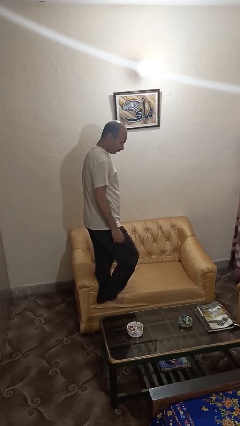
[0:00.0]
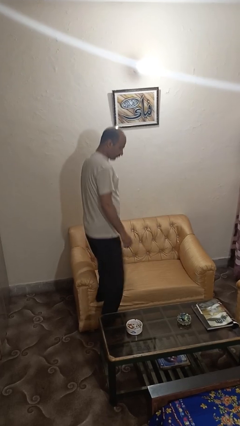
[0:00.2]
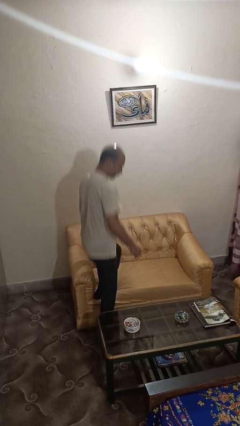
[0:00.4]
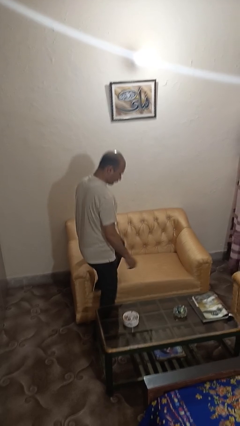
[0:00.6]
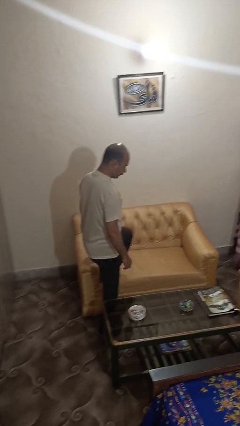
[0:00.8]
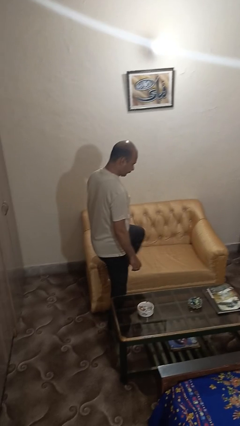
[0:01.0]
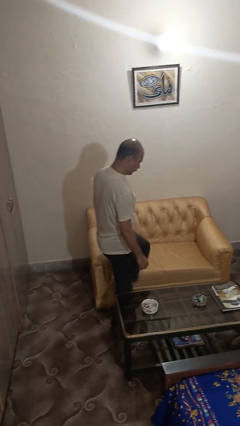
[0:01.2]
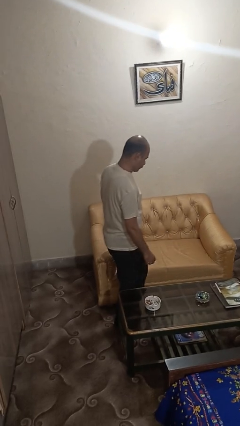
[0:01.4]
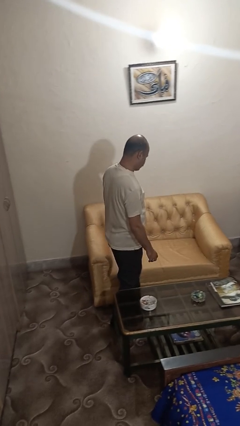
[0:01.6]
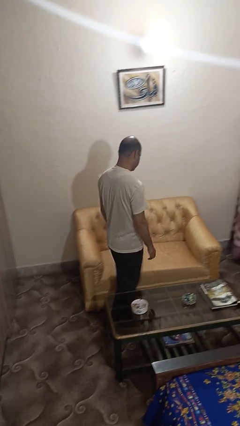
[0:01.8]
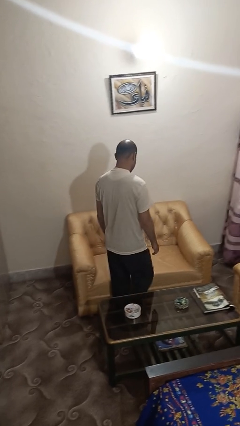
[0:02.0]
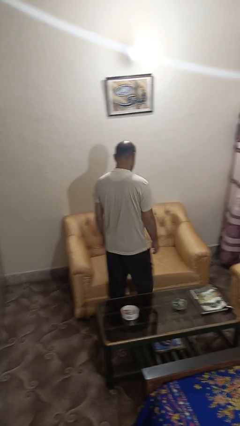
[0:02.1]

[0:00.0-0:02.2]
person climbs off couch

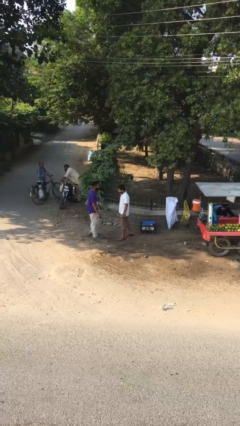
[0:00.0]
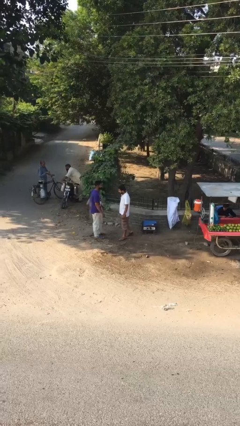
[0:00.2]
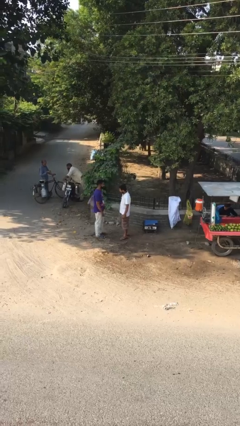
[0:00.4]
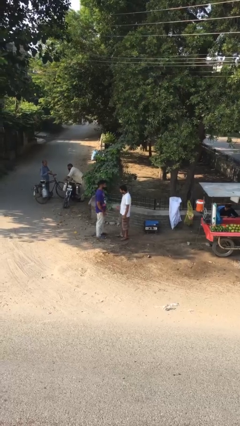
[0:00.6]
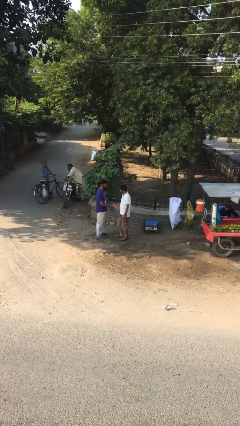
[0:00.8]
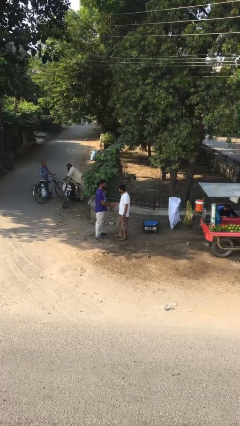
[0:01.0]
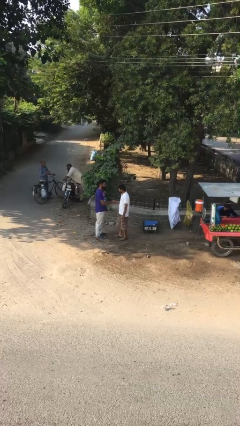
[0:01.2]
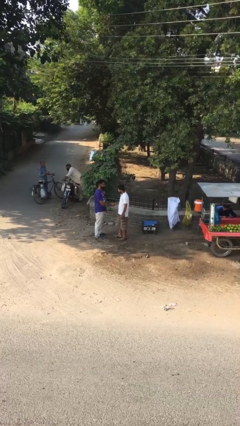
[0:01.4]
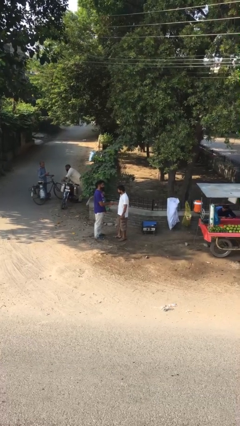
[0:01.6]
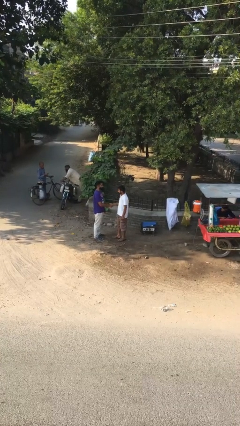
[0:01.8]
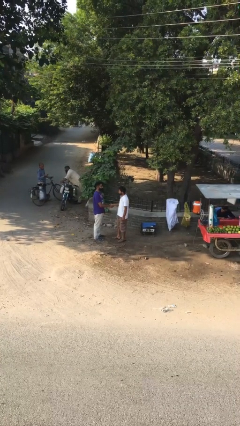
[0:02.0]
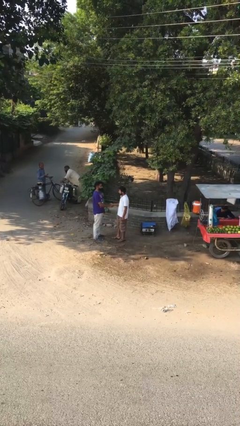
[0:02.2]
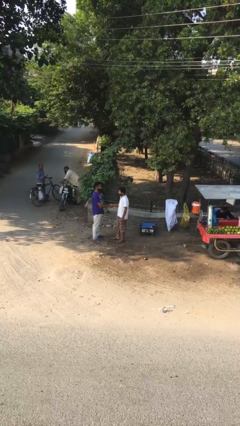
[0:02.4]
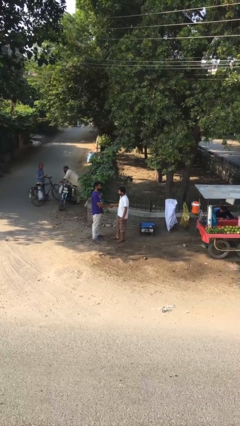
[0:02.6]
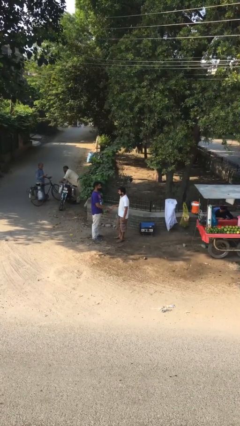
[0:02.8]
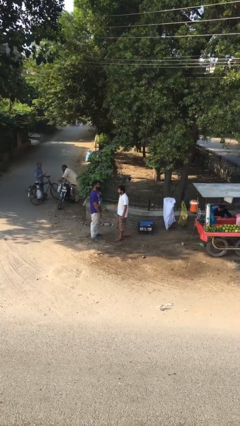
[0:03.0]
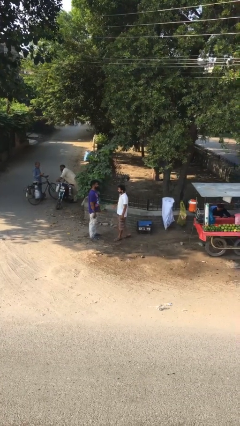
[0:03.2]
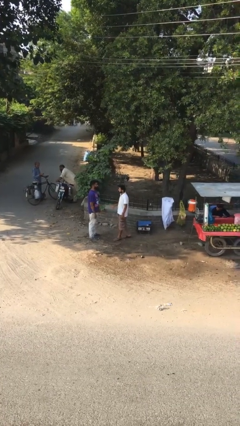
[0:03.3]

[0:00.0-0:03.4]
person shakes hand

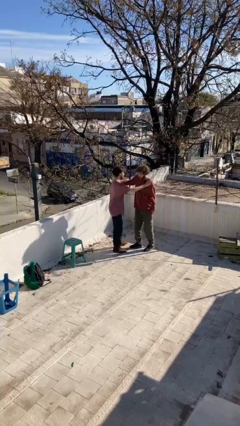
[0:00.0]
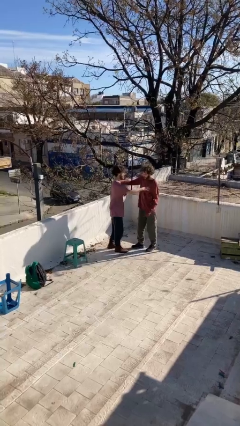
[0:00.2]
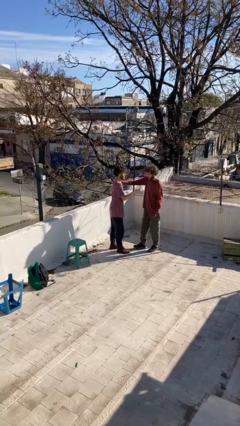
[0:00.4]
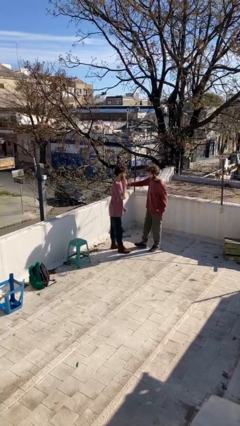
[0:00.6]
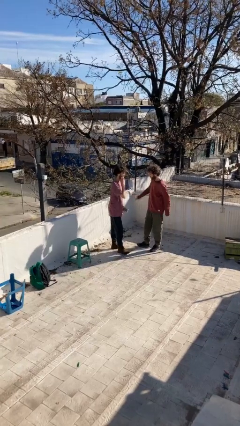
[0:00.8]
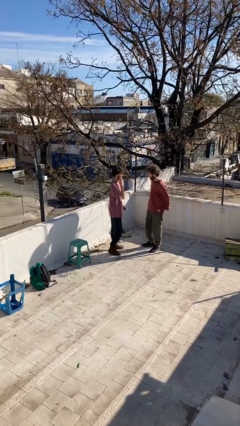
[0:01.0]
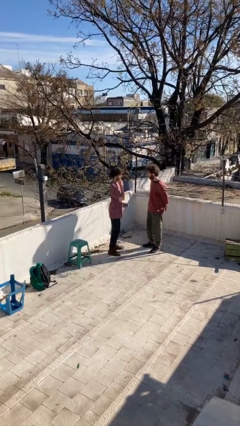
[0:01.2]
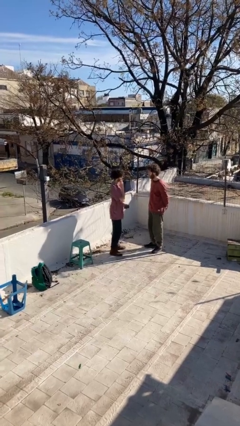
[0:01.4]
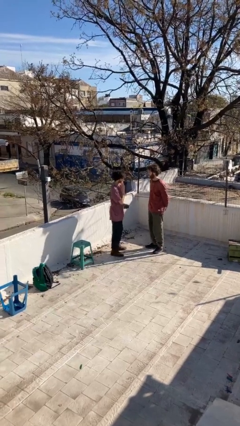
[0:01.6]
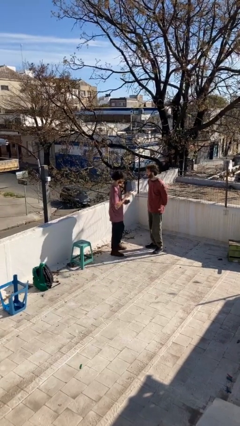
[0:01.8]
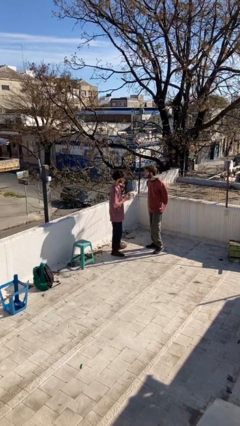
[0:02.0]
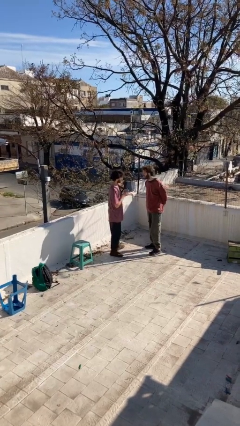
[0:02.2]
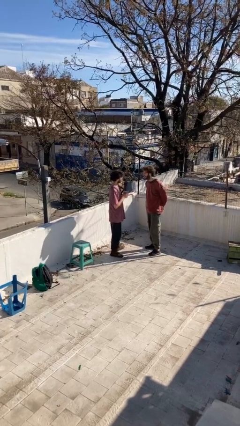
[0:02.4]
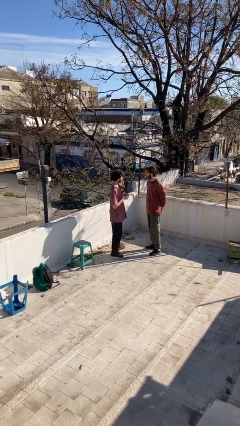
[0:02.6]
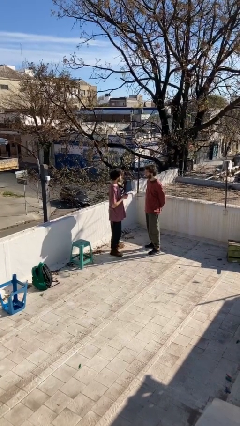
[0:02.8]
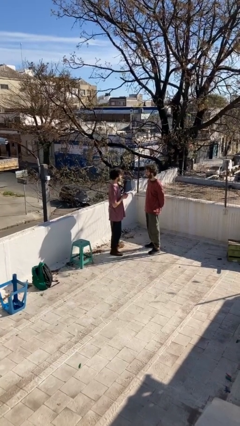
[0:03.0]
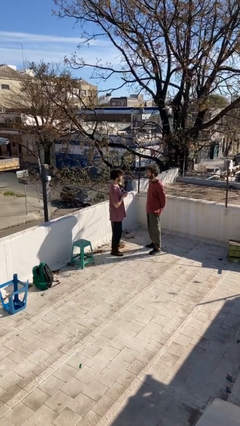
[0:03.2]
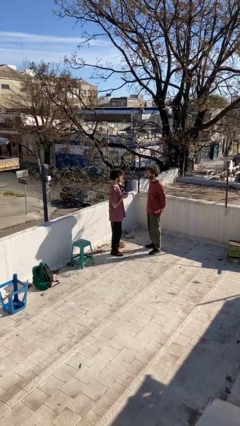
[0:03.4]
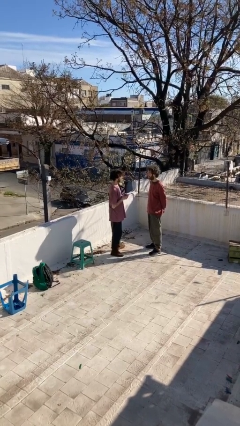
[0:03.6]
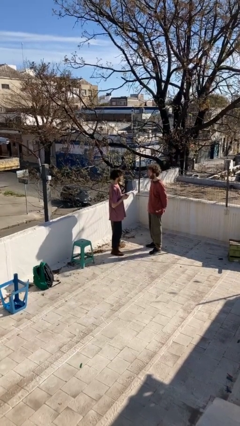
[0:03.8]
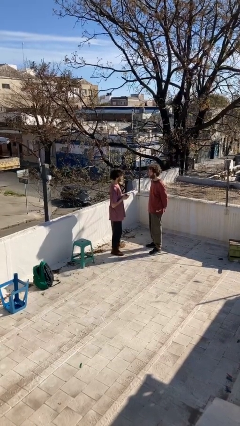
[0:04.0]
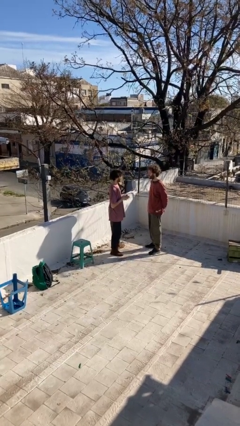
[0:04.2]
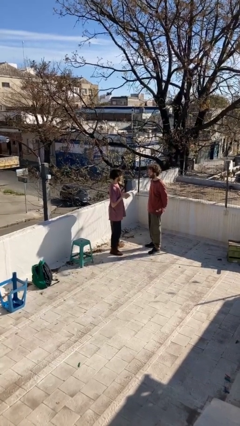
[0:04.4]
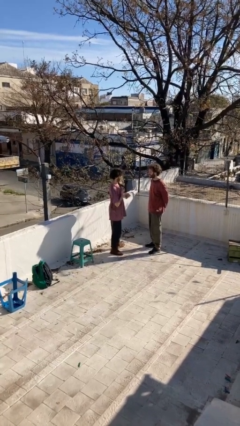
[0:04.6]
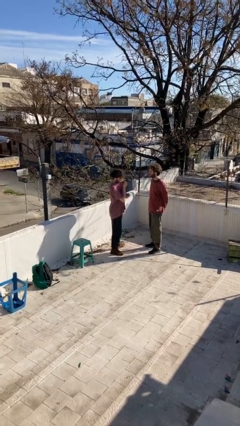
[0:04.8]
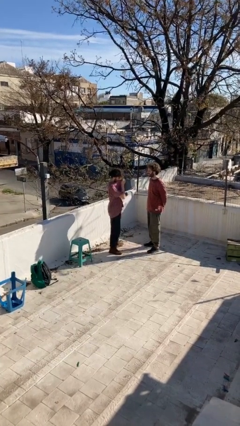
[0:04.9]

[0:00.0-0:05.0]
person talks to person

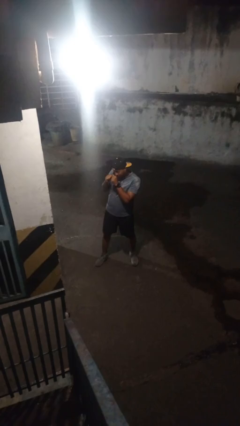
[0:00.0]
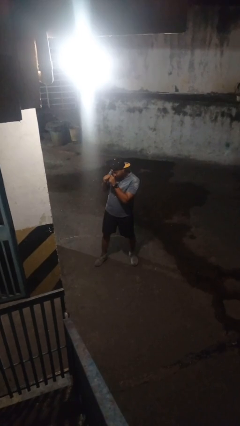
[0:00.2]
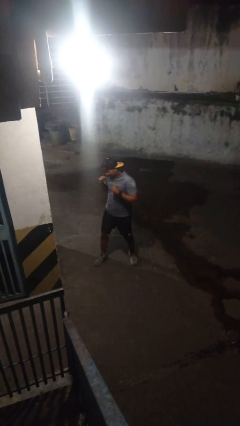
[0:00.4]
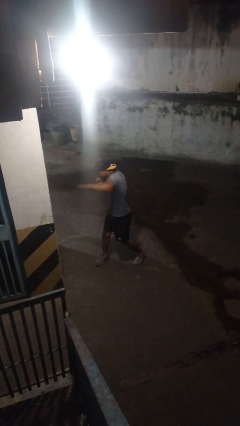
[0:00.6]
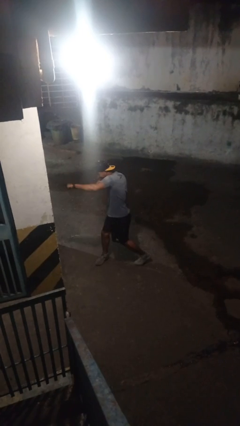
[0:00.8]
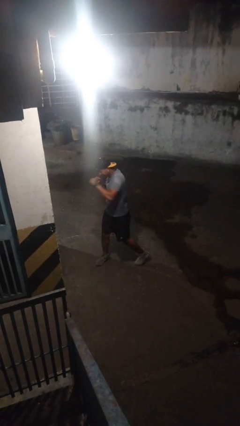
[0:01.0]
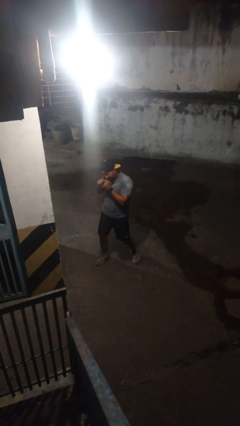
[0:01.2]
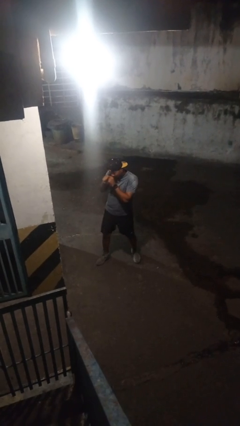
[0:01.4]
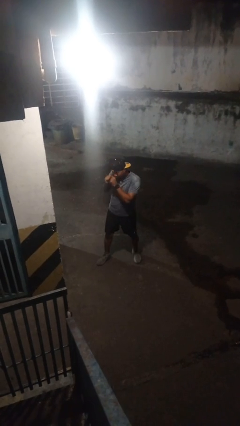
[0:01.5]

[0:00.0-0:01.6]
person punches

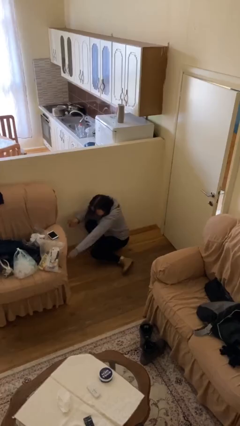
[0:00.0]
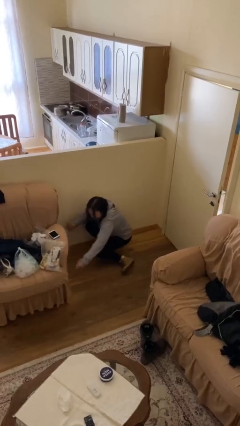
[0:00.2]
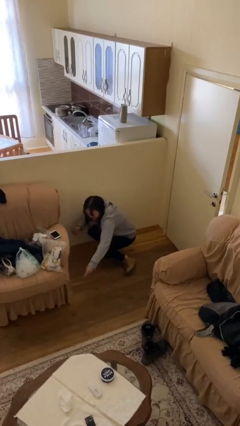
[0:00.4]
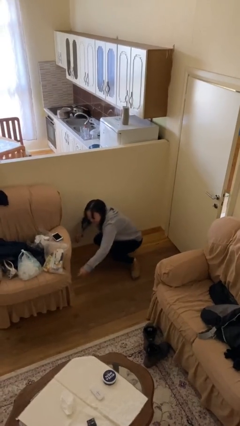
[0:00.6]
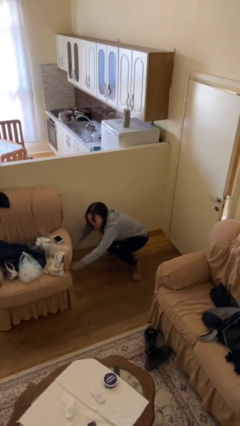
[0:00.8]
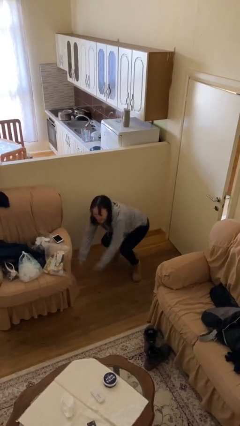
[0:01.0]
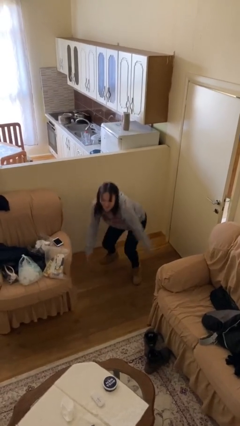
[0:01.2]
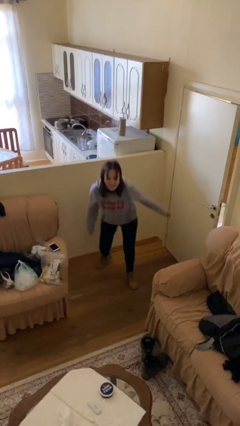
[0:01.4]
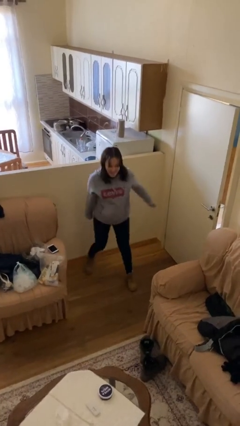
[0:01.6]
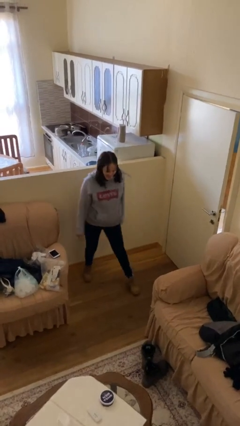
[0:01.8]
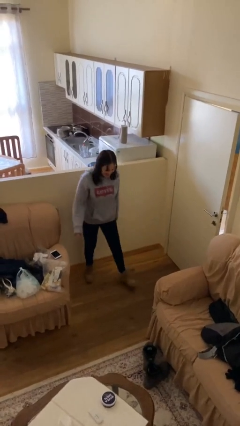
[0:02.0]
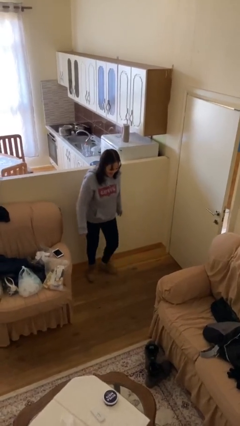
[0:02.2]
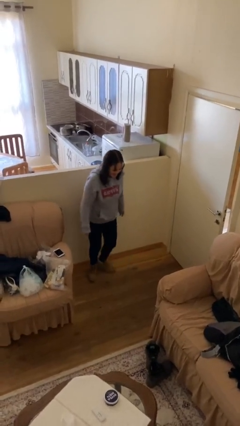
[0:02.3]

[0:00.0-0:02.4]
person stands up

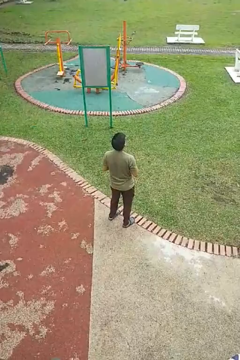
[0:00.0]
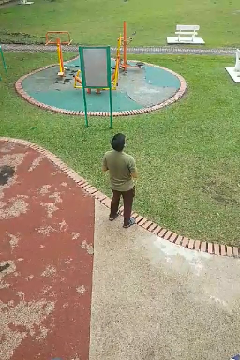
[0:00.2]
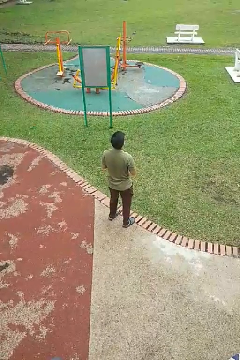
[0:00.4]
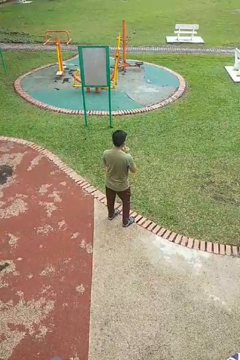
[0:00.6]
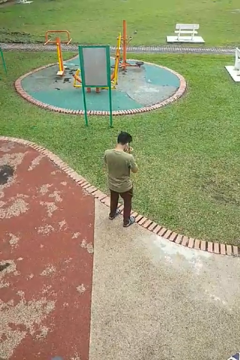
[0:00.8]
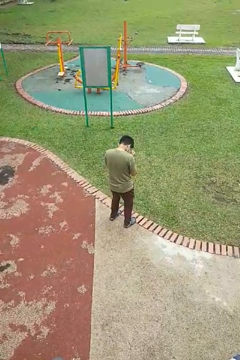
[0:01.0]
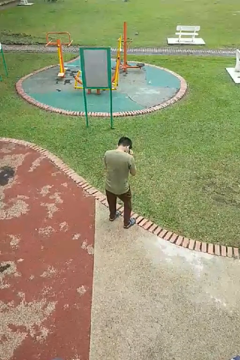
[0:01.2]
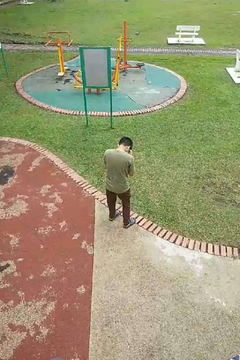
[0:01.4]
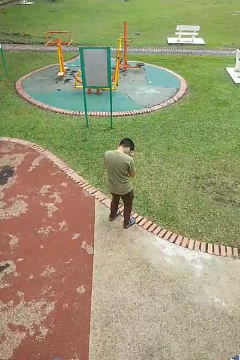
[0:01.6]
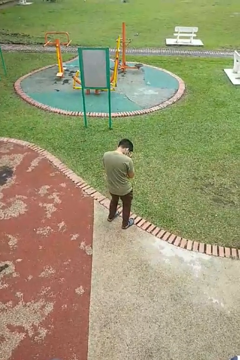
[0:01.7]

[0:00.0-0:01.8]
person wiggles hips

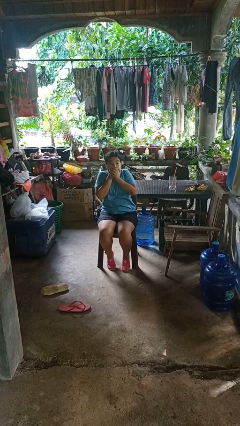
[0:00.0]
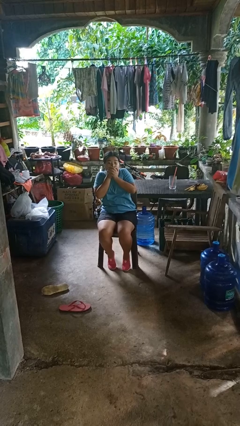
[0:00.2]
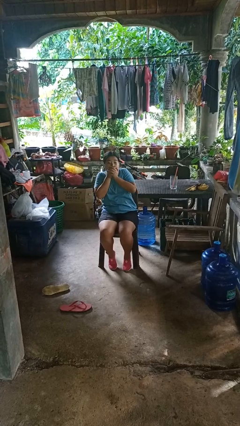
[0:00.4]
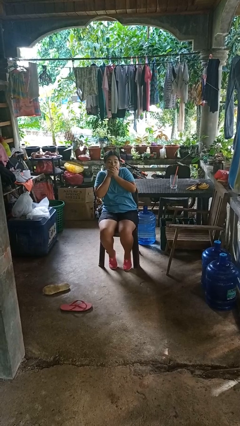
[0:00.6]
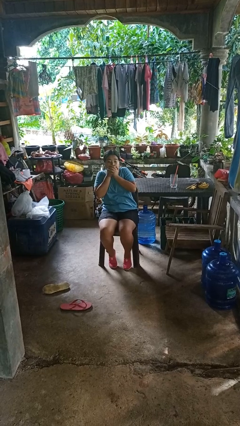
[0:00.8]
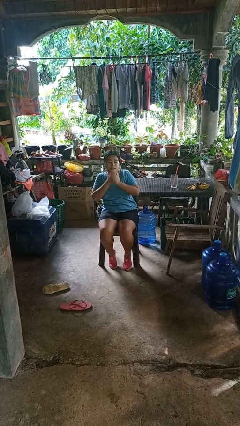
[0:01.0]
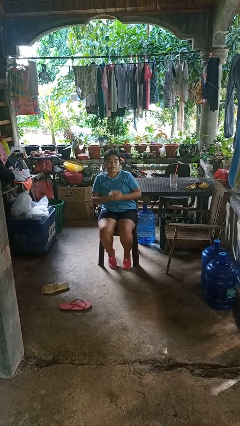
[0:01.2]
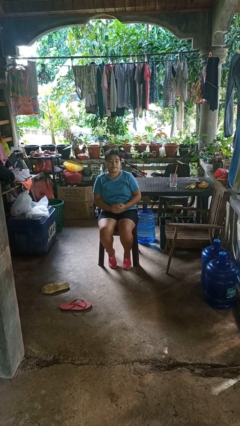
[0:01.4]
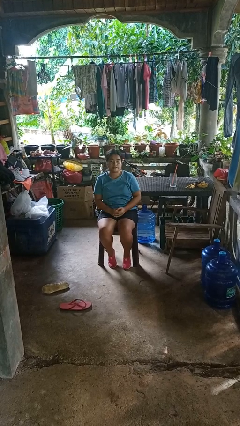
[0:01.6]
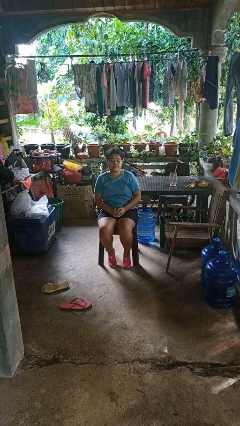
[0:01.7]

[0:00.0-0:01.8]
person covers face with hands
